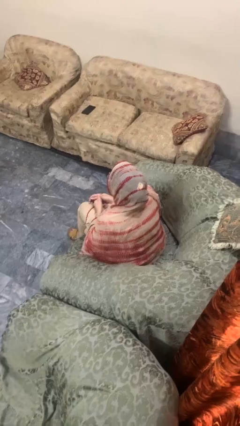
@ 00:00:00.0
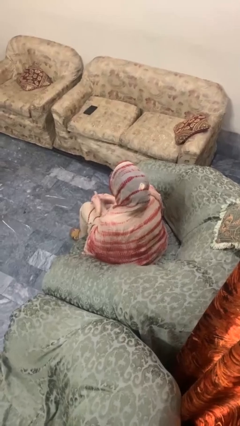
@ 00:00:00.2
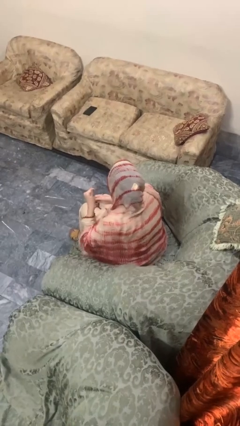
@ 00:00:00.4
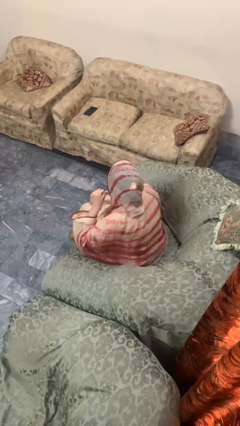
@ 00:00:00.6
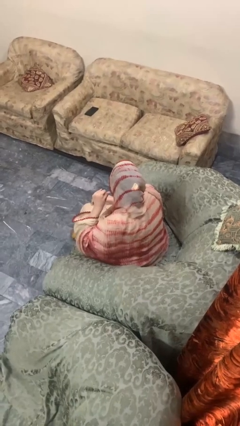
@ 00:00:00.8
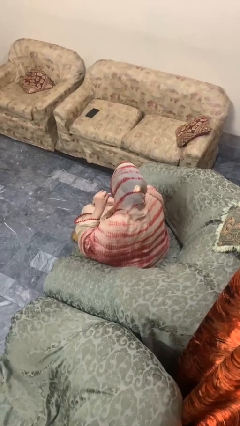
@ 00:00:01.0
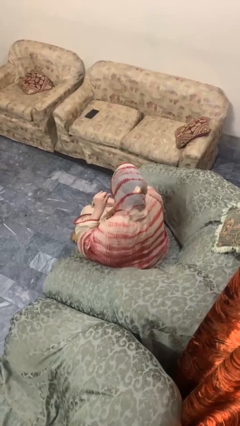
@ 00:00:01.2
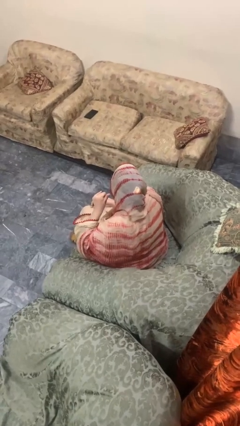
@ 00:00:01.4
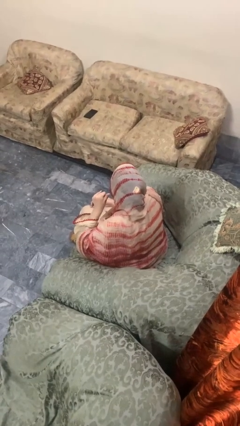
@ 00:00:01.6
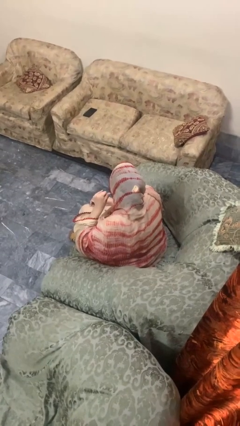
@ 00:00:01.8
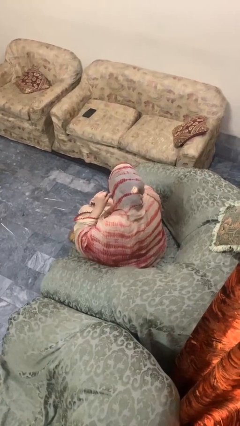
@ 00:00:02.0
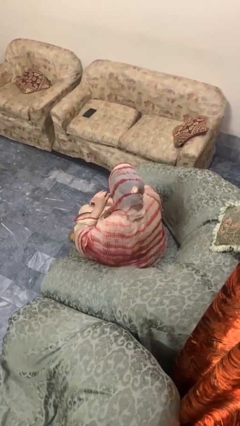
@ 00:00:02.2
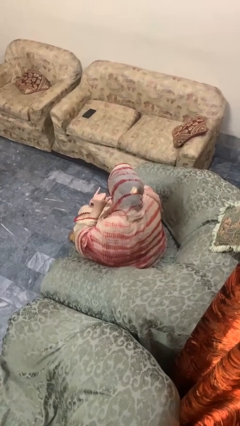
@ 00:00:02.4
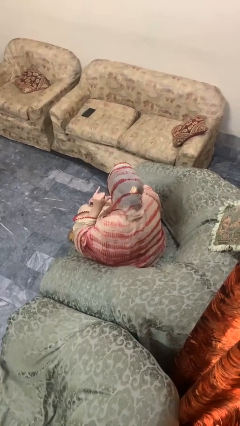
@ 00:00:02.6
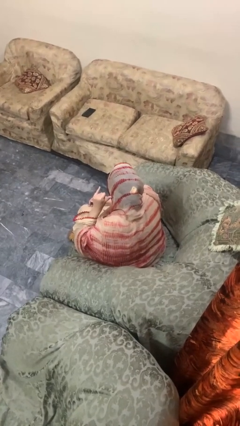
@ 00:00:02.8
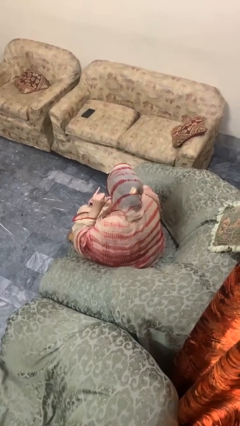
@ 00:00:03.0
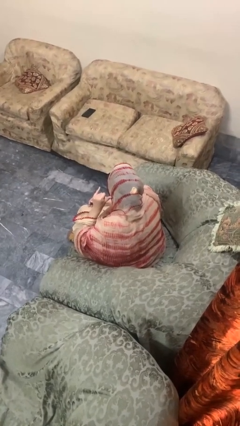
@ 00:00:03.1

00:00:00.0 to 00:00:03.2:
person gestures call me

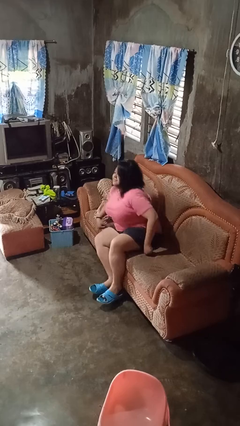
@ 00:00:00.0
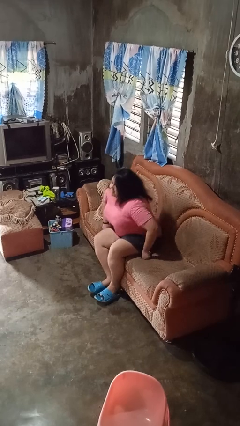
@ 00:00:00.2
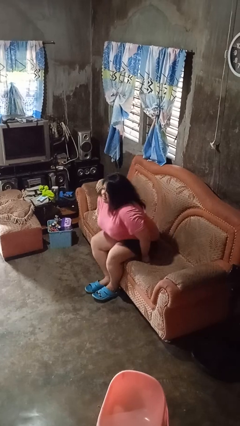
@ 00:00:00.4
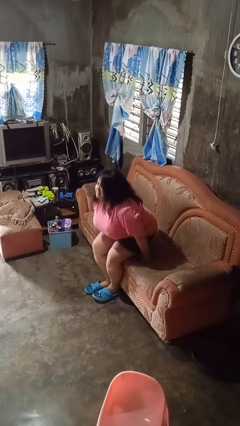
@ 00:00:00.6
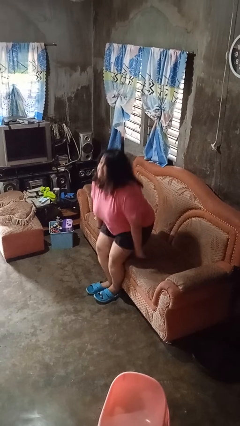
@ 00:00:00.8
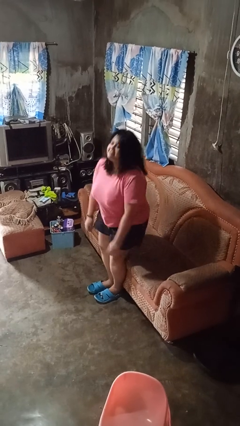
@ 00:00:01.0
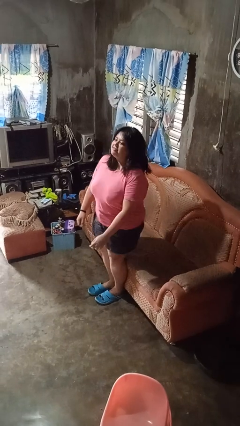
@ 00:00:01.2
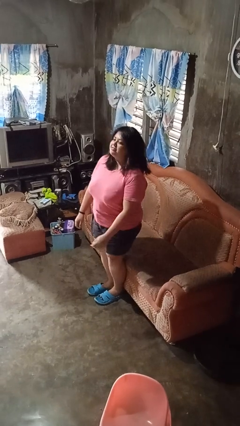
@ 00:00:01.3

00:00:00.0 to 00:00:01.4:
person stands up

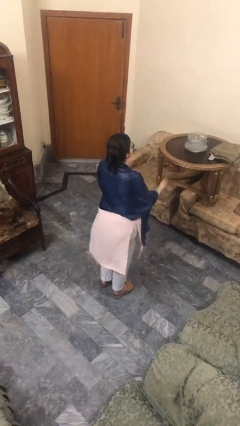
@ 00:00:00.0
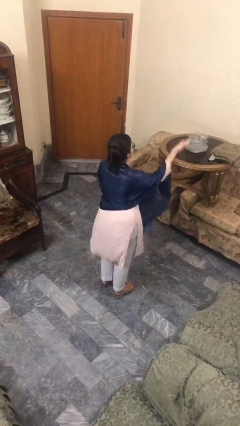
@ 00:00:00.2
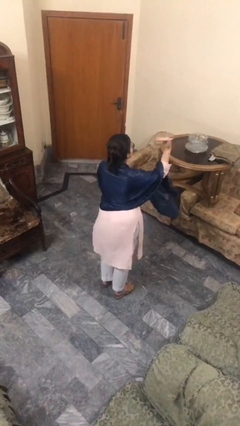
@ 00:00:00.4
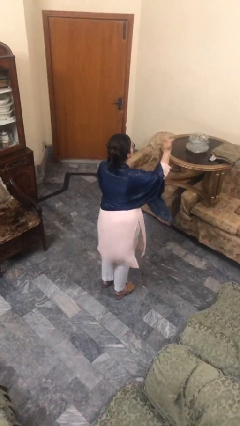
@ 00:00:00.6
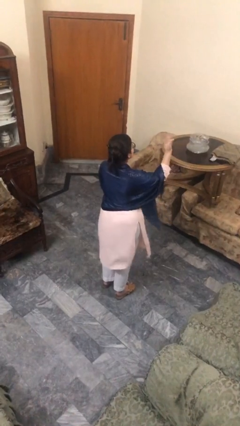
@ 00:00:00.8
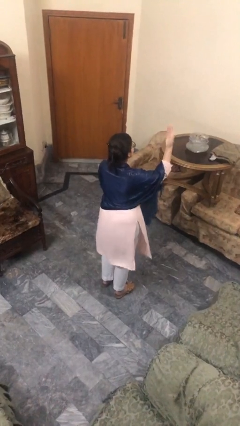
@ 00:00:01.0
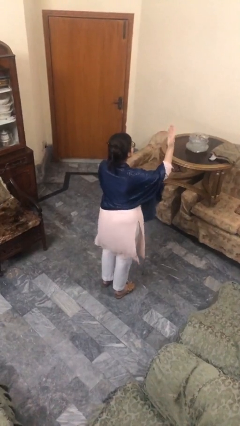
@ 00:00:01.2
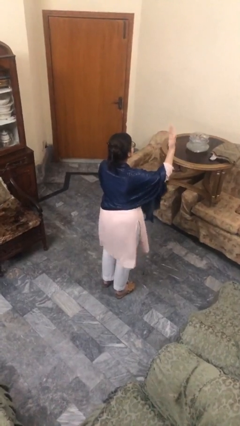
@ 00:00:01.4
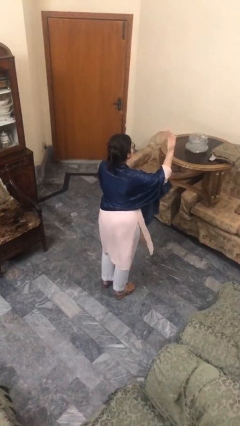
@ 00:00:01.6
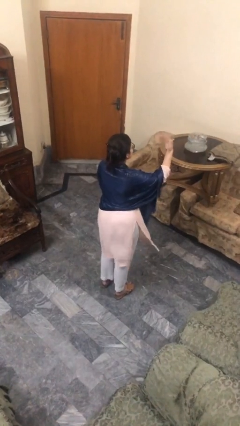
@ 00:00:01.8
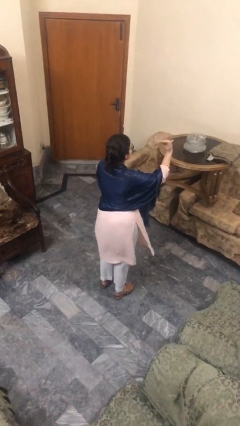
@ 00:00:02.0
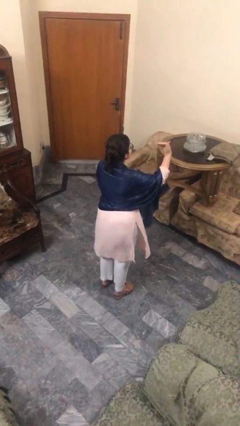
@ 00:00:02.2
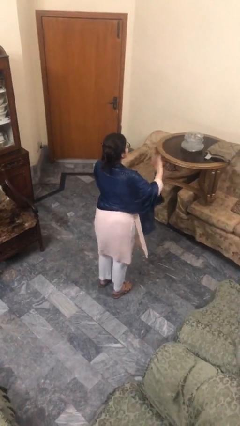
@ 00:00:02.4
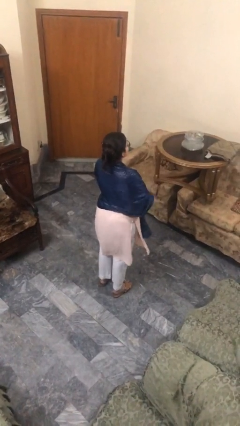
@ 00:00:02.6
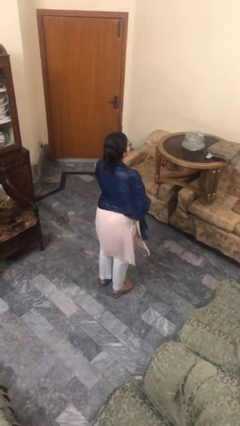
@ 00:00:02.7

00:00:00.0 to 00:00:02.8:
person gestures come here

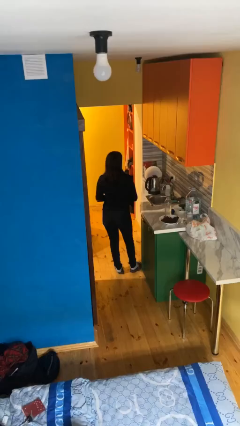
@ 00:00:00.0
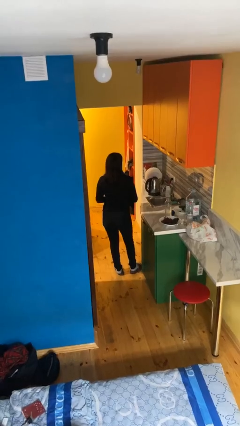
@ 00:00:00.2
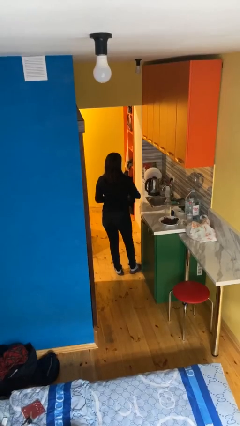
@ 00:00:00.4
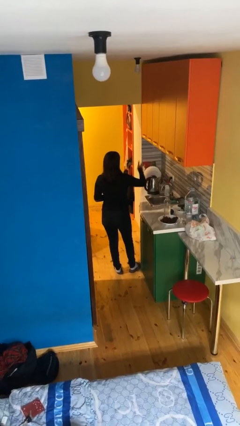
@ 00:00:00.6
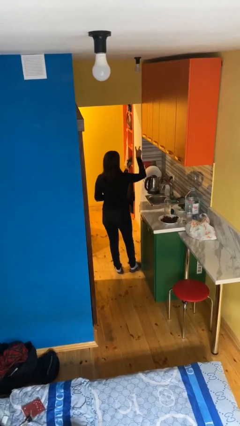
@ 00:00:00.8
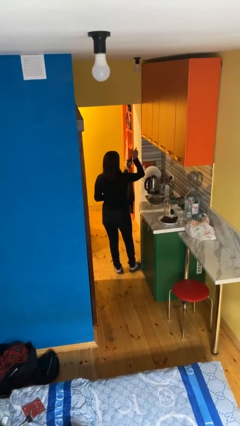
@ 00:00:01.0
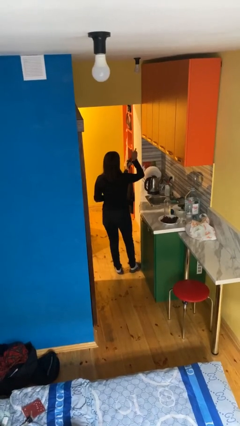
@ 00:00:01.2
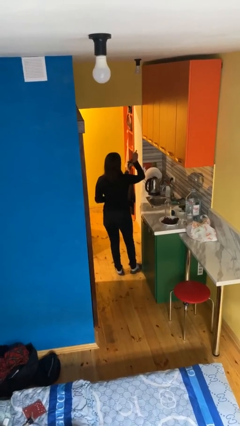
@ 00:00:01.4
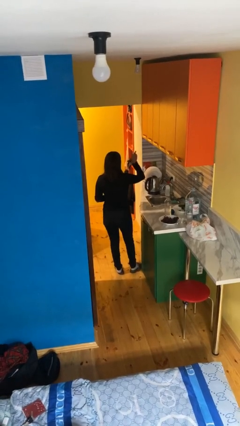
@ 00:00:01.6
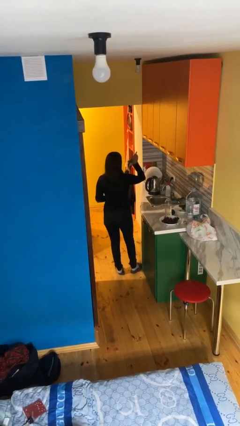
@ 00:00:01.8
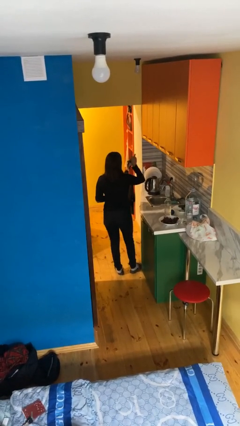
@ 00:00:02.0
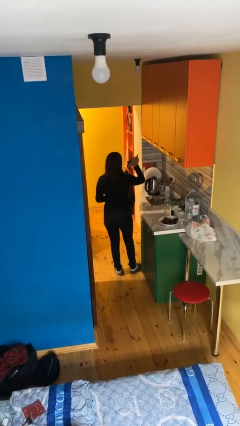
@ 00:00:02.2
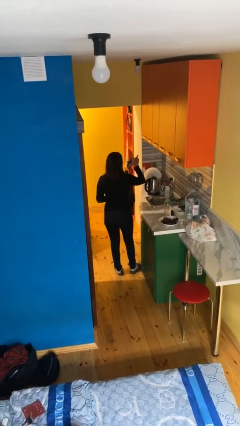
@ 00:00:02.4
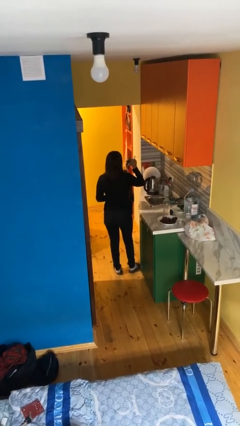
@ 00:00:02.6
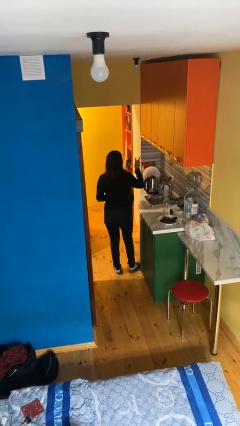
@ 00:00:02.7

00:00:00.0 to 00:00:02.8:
person gestures peace

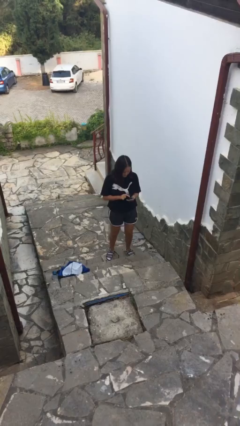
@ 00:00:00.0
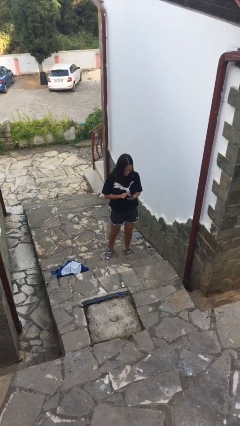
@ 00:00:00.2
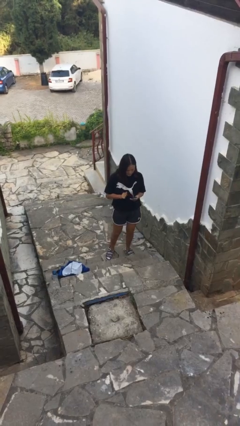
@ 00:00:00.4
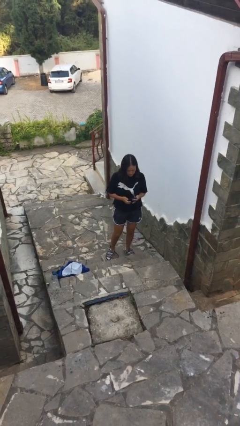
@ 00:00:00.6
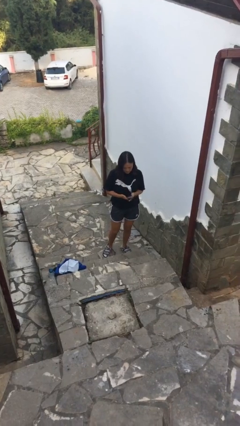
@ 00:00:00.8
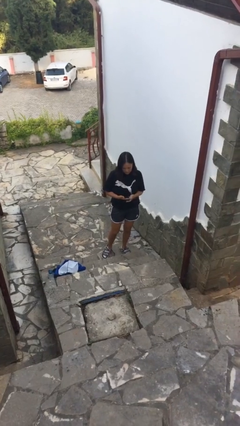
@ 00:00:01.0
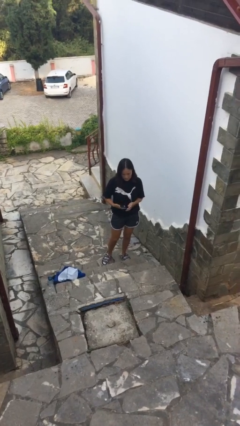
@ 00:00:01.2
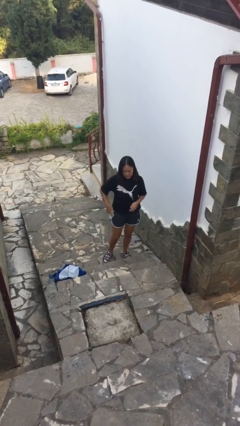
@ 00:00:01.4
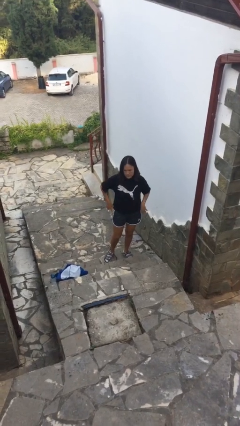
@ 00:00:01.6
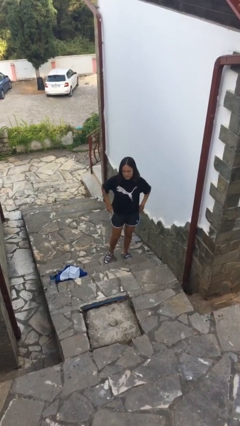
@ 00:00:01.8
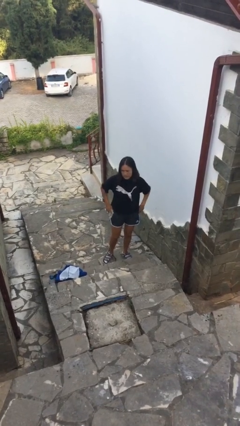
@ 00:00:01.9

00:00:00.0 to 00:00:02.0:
person puts phone into pocket

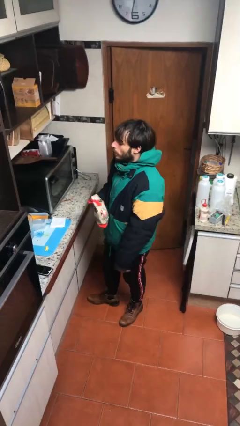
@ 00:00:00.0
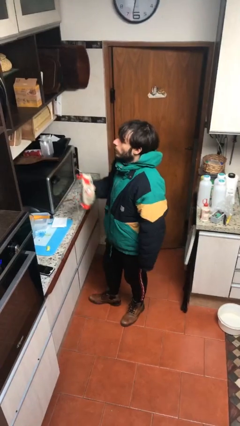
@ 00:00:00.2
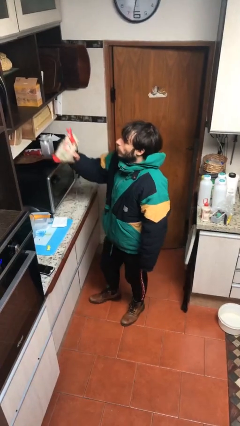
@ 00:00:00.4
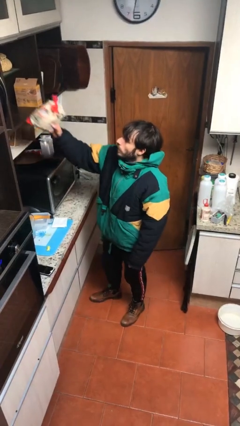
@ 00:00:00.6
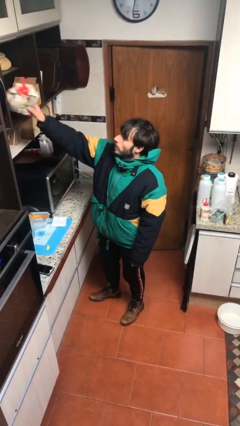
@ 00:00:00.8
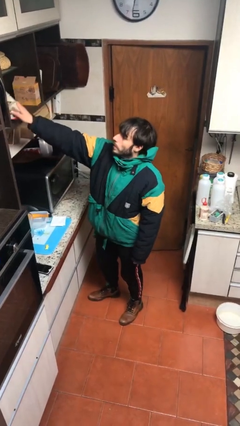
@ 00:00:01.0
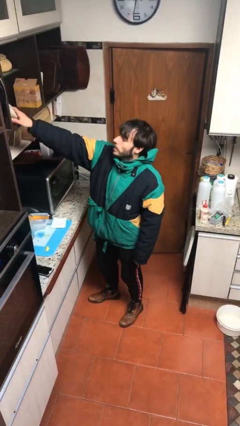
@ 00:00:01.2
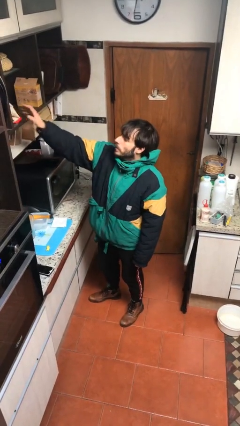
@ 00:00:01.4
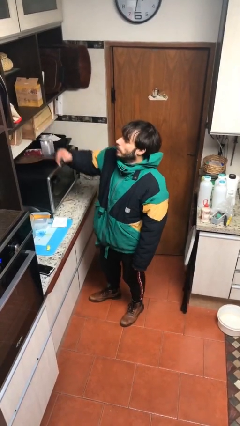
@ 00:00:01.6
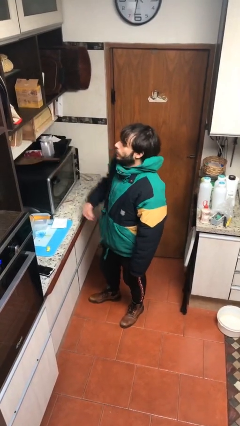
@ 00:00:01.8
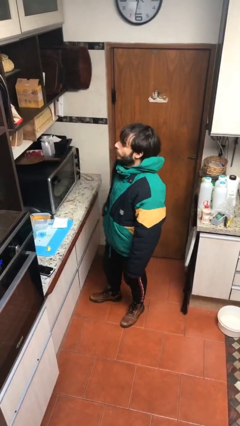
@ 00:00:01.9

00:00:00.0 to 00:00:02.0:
person puts down object into cabinet

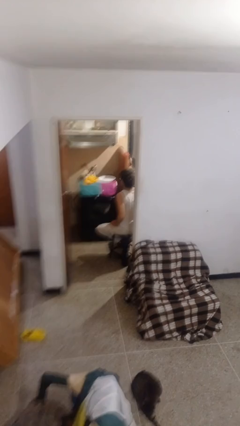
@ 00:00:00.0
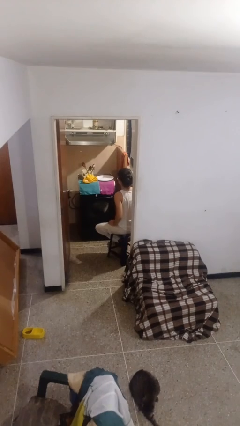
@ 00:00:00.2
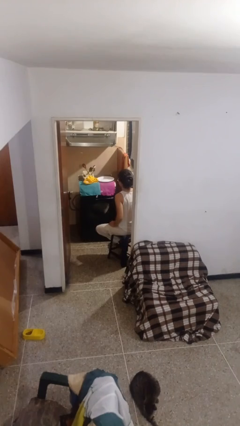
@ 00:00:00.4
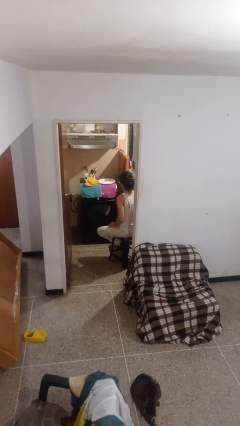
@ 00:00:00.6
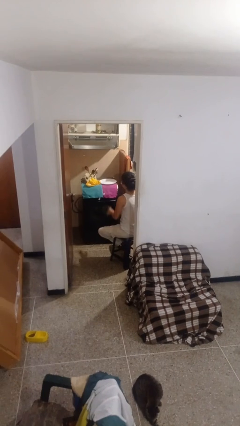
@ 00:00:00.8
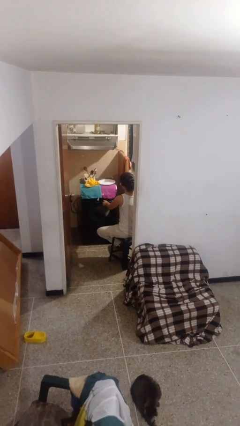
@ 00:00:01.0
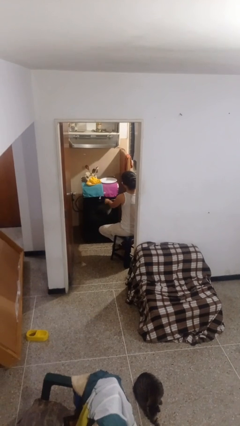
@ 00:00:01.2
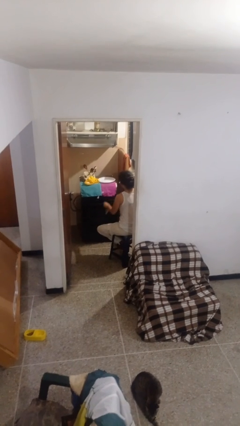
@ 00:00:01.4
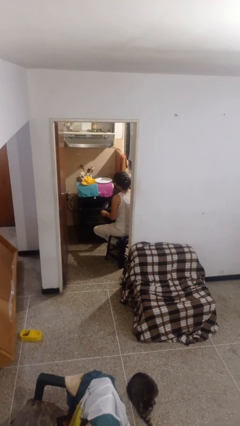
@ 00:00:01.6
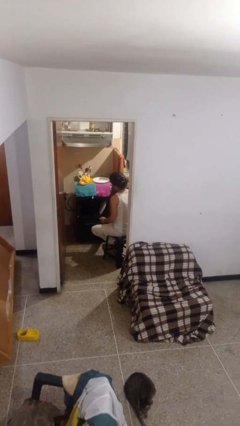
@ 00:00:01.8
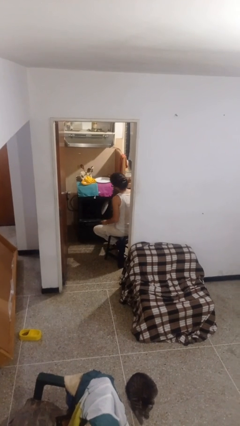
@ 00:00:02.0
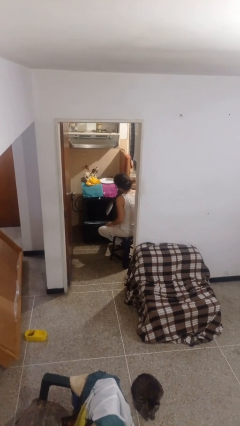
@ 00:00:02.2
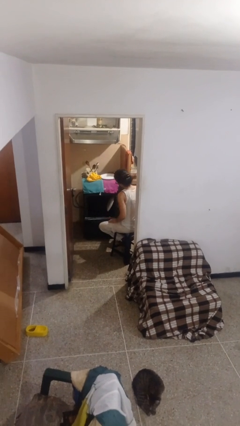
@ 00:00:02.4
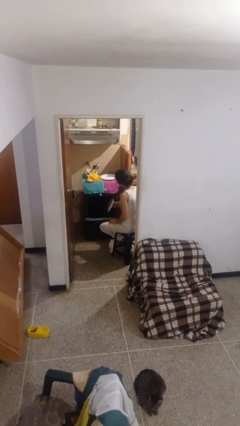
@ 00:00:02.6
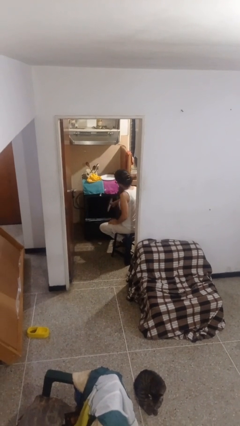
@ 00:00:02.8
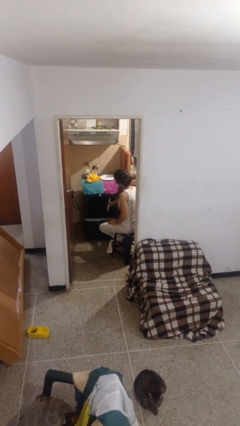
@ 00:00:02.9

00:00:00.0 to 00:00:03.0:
person opens dishwasher
